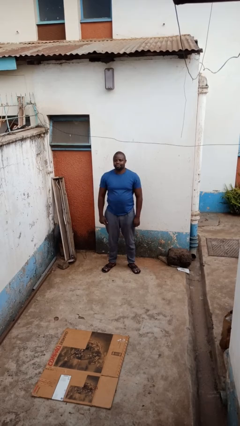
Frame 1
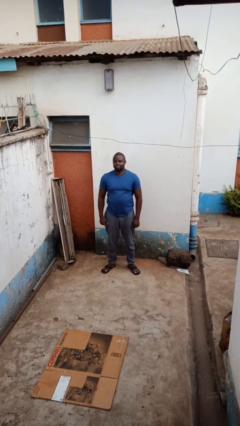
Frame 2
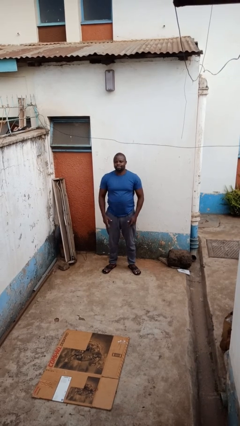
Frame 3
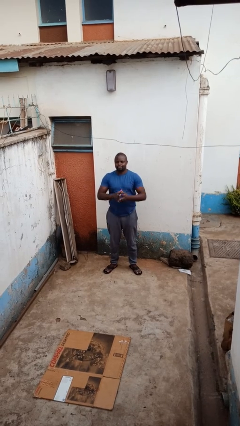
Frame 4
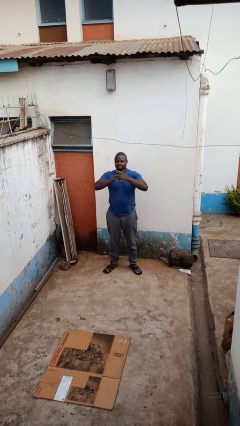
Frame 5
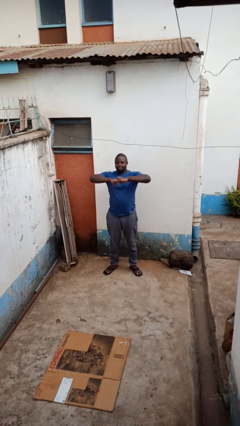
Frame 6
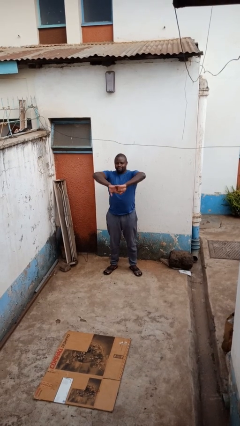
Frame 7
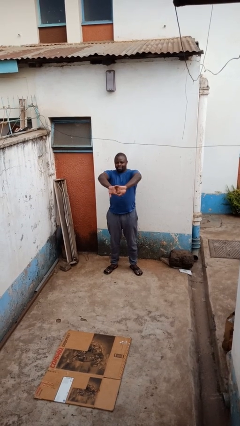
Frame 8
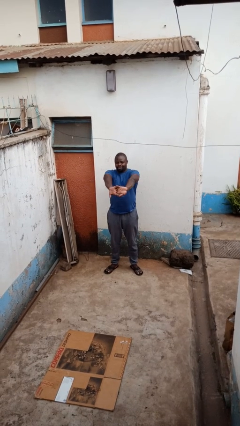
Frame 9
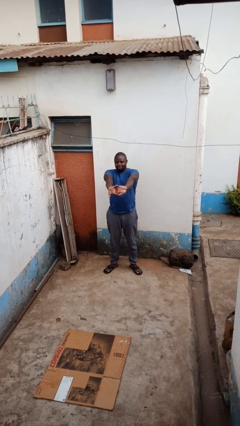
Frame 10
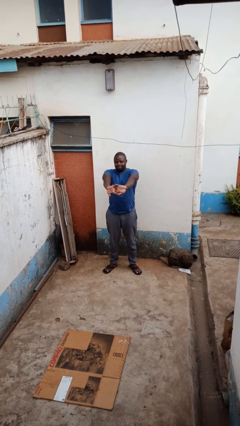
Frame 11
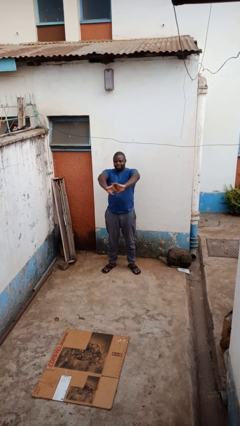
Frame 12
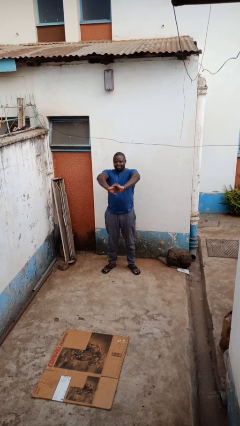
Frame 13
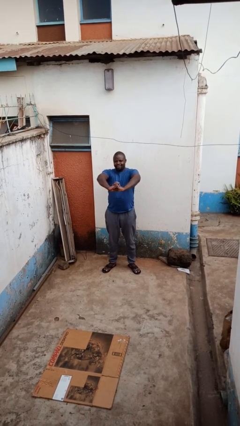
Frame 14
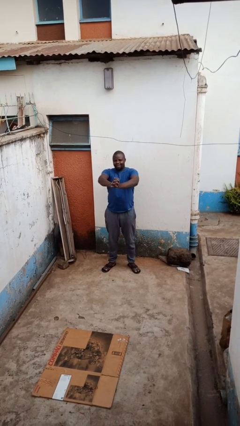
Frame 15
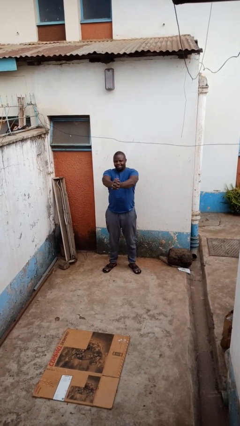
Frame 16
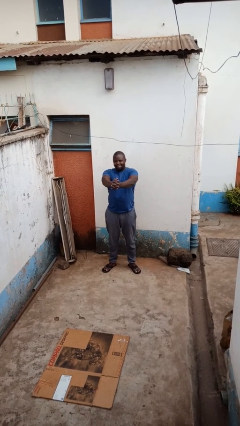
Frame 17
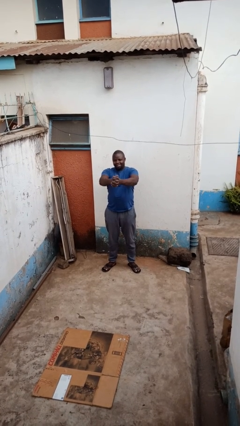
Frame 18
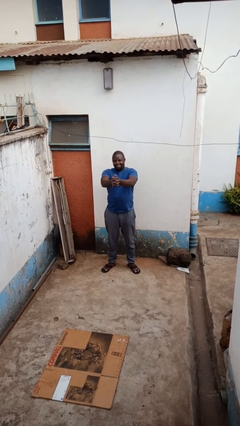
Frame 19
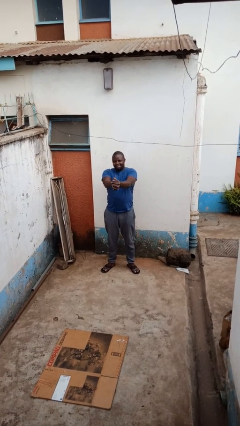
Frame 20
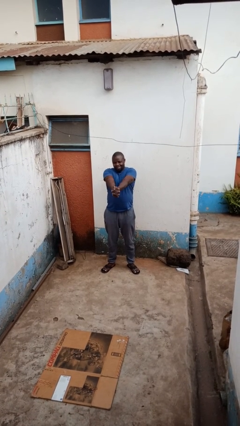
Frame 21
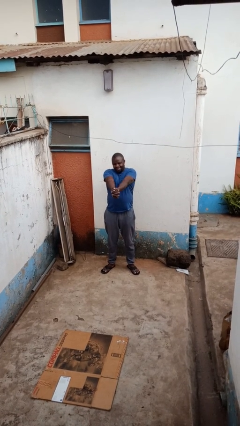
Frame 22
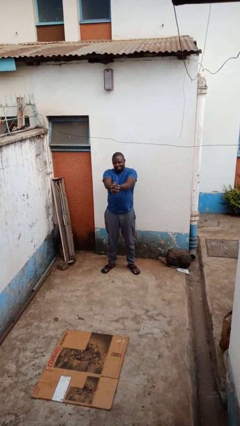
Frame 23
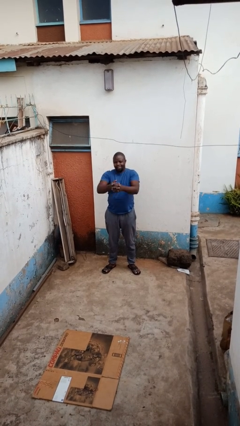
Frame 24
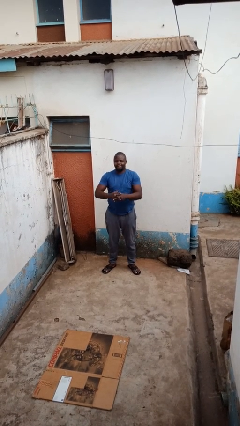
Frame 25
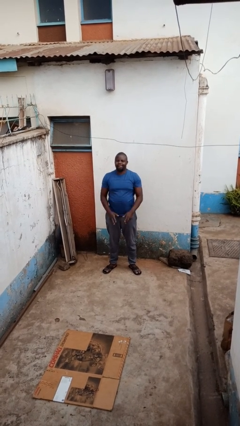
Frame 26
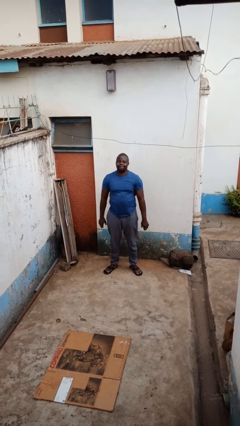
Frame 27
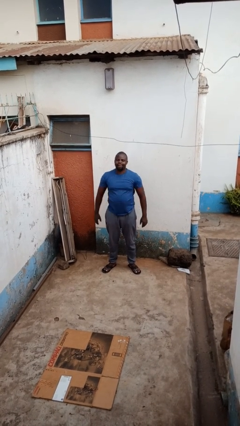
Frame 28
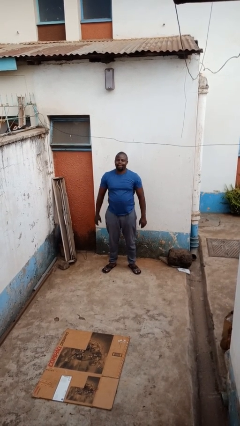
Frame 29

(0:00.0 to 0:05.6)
person cracks knuckles

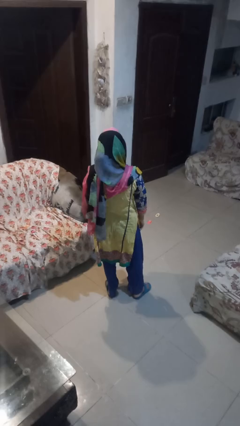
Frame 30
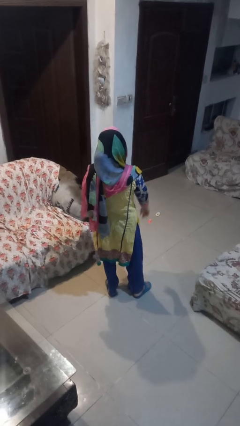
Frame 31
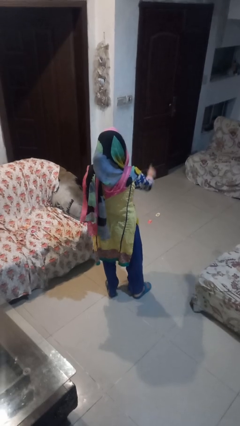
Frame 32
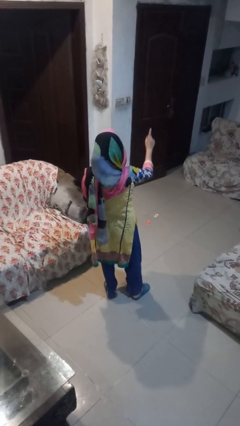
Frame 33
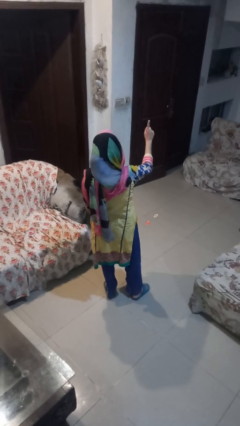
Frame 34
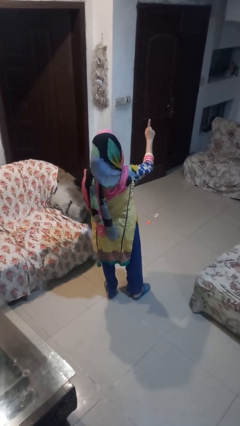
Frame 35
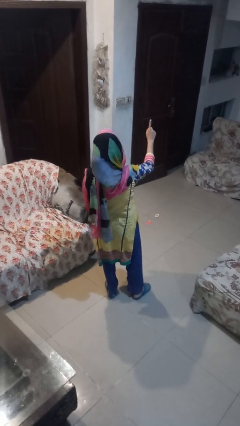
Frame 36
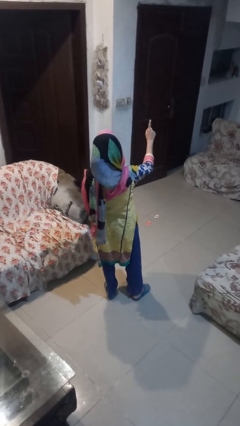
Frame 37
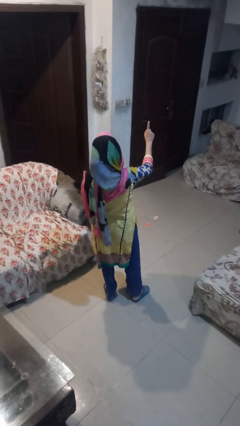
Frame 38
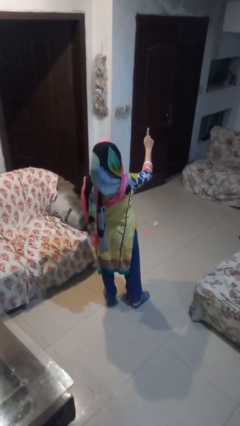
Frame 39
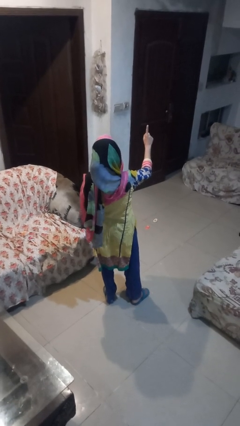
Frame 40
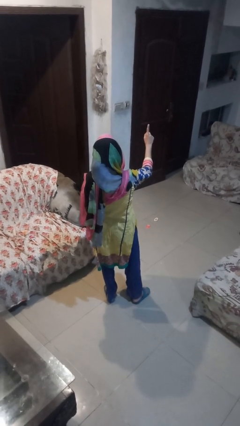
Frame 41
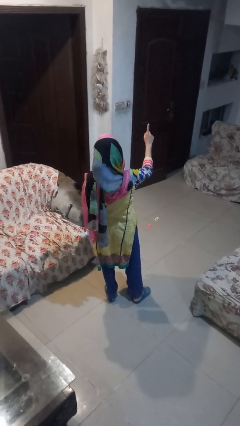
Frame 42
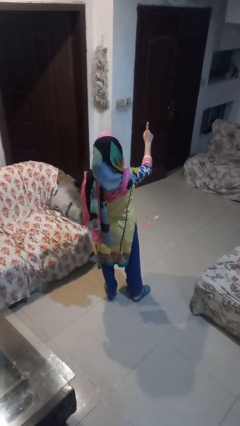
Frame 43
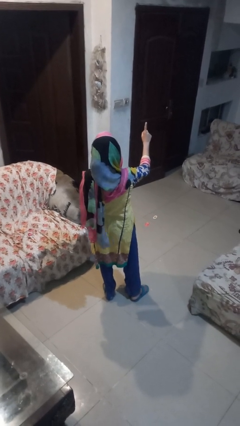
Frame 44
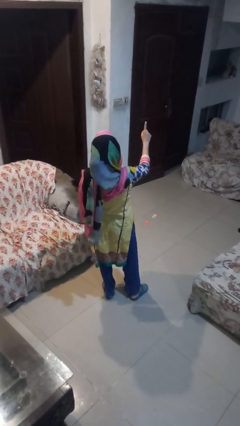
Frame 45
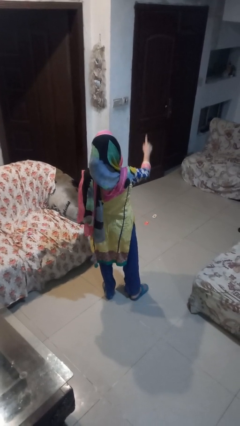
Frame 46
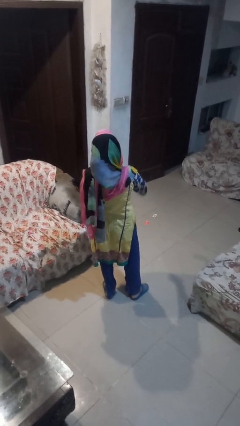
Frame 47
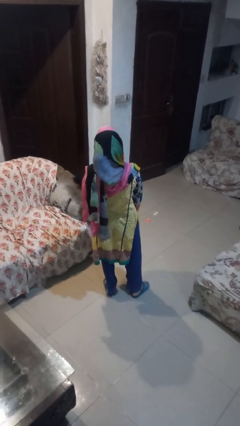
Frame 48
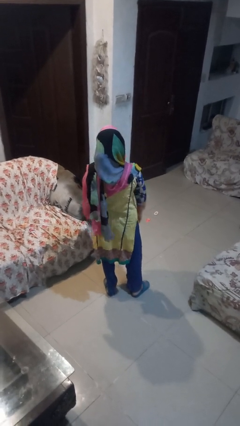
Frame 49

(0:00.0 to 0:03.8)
person gestures number one

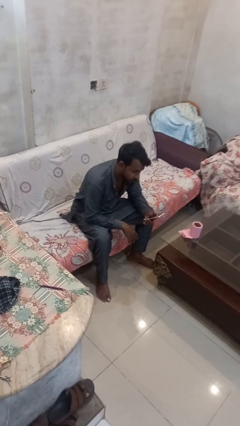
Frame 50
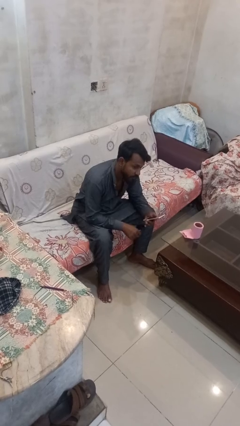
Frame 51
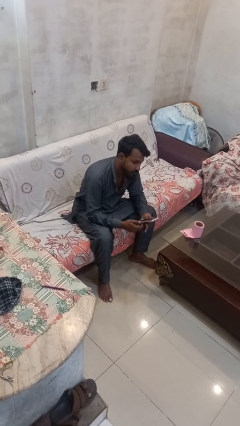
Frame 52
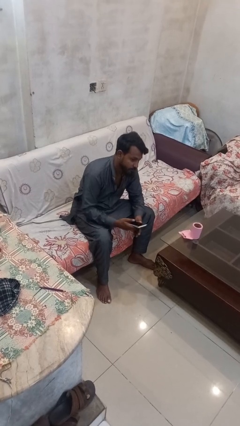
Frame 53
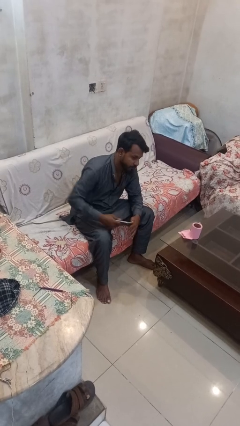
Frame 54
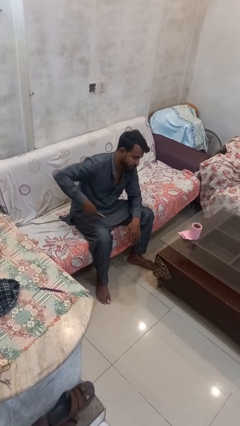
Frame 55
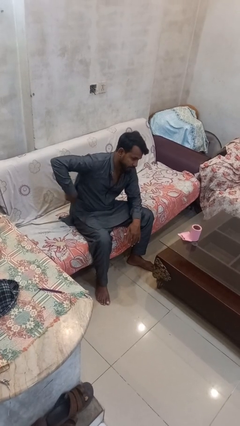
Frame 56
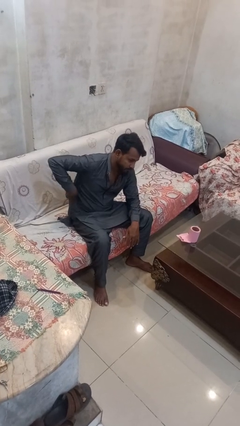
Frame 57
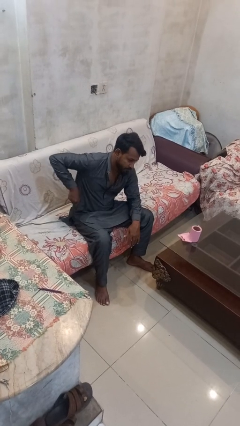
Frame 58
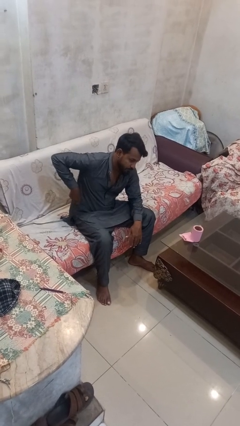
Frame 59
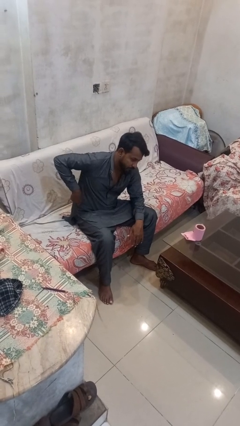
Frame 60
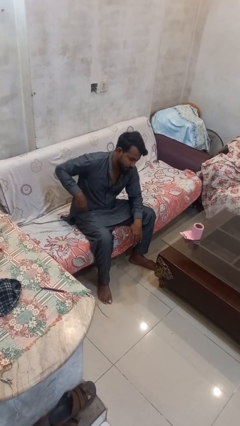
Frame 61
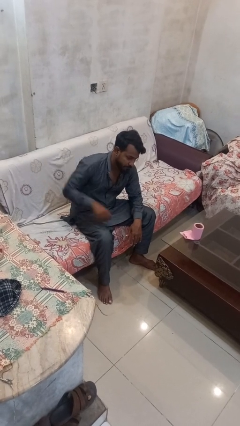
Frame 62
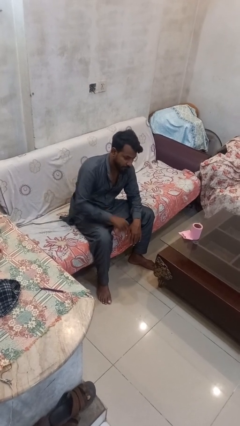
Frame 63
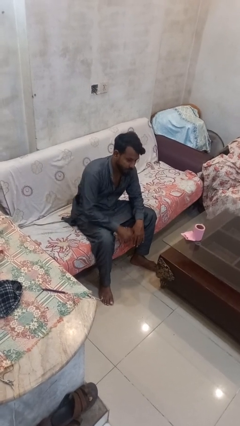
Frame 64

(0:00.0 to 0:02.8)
person puts phone into pocket

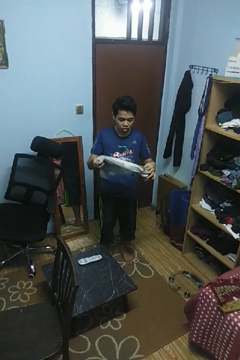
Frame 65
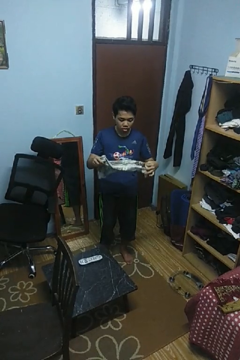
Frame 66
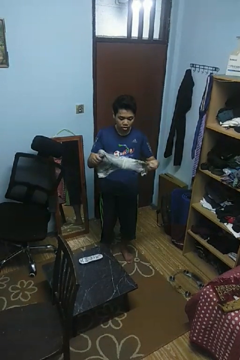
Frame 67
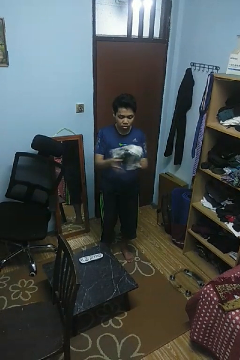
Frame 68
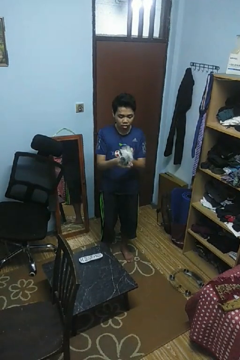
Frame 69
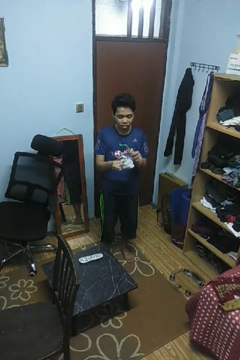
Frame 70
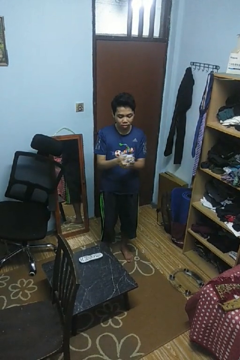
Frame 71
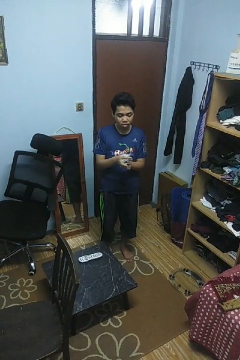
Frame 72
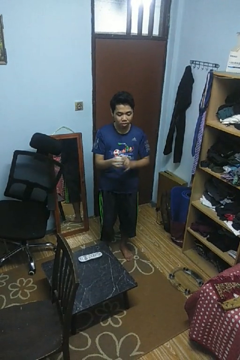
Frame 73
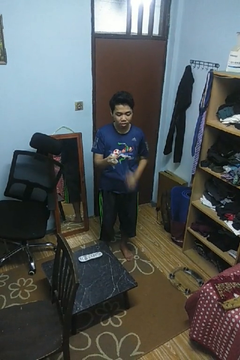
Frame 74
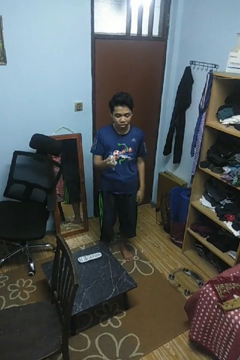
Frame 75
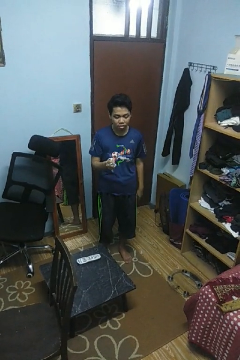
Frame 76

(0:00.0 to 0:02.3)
person crumples paper

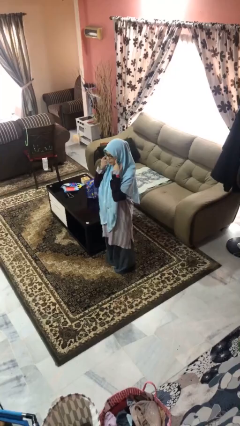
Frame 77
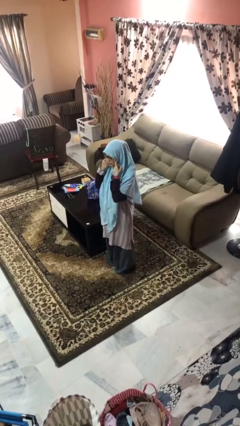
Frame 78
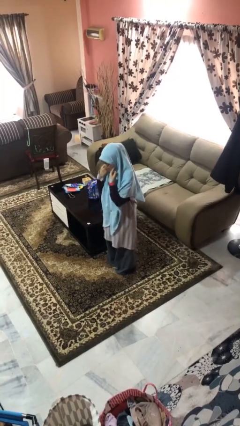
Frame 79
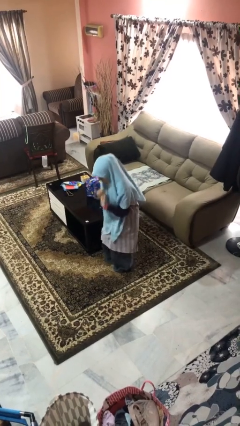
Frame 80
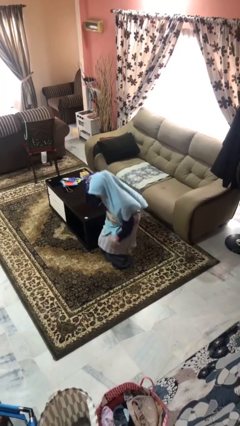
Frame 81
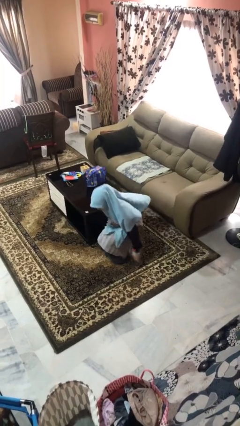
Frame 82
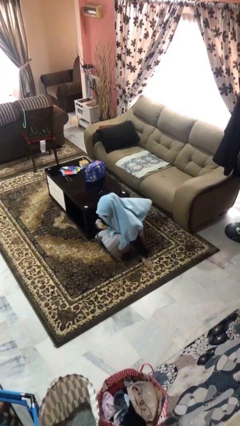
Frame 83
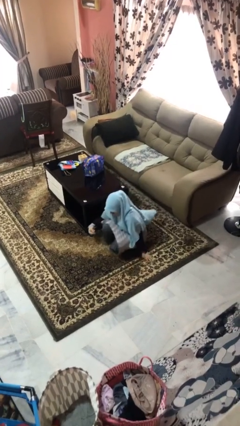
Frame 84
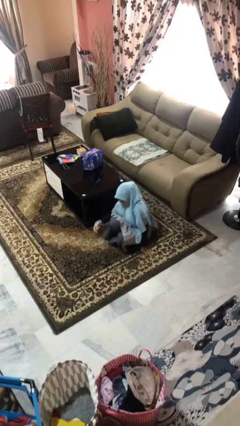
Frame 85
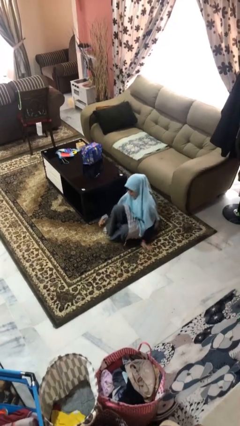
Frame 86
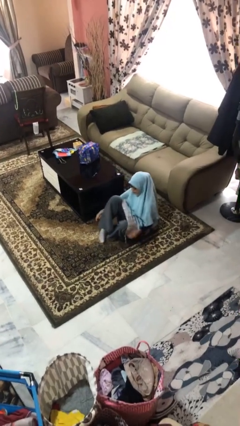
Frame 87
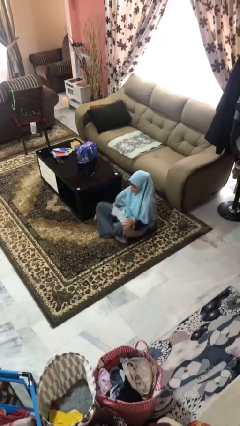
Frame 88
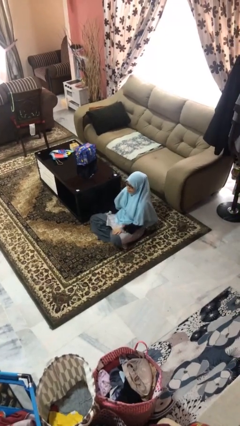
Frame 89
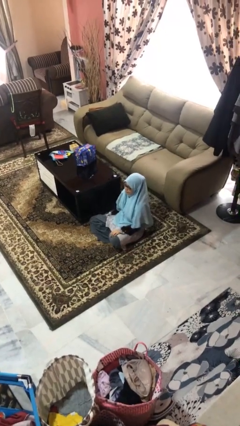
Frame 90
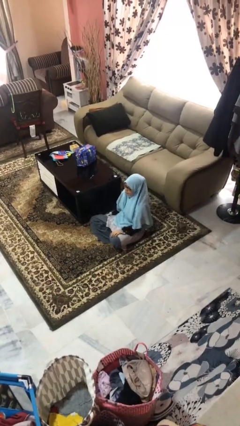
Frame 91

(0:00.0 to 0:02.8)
person sits crisscross

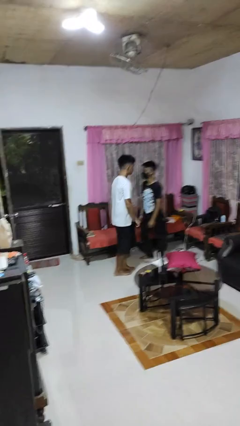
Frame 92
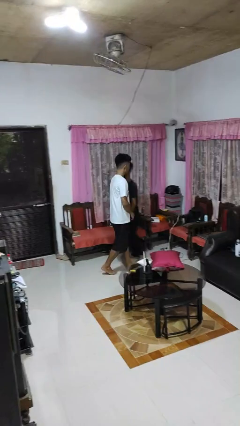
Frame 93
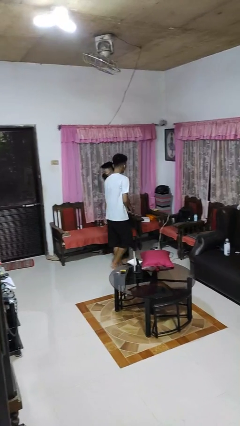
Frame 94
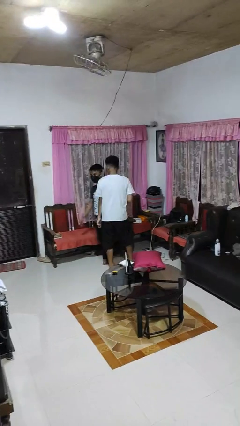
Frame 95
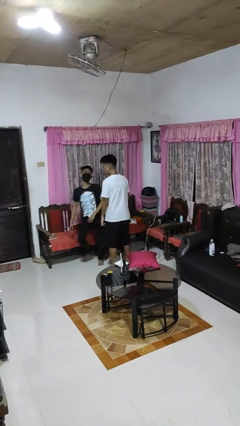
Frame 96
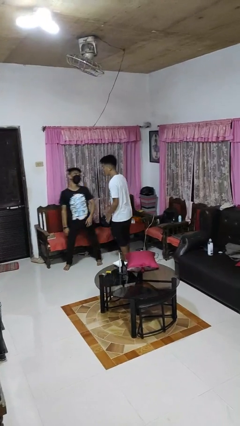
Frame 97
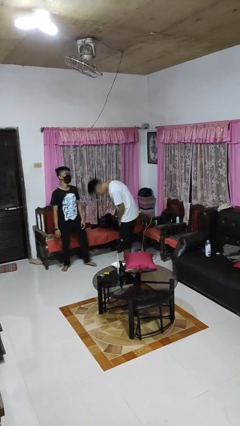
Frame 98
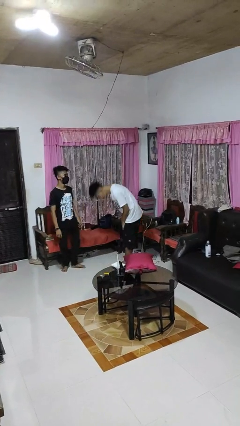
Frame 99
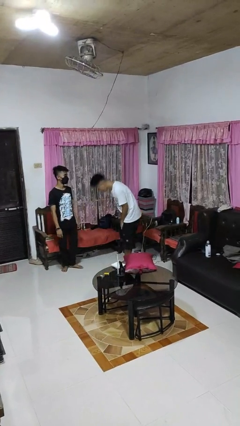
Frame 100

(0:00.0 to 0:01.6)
person bumps into person
